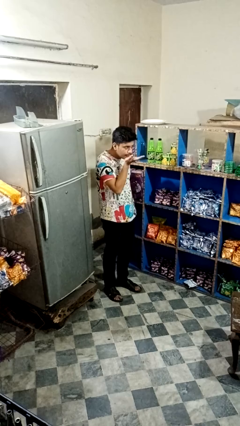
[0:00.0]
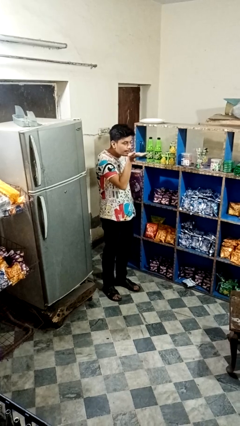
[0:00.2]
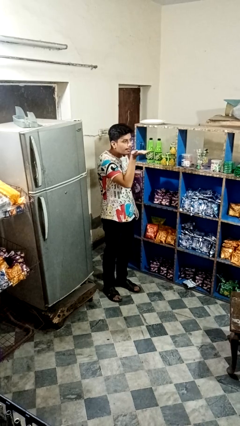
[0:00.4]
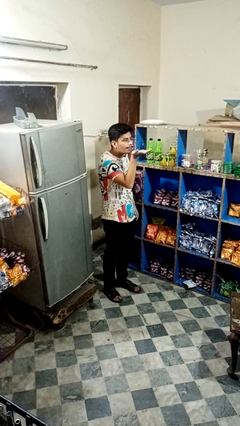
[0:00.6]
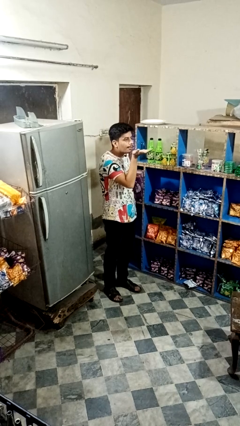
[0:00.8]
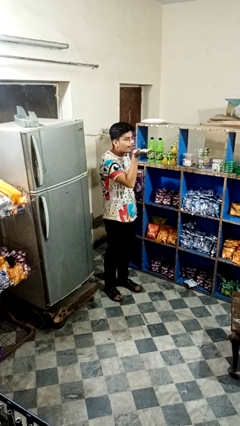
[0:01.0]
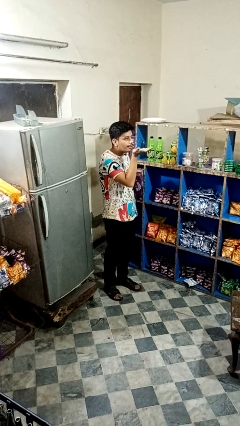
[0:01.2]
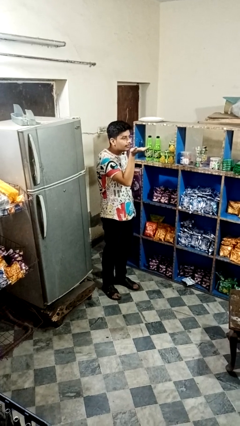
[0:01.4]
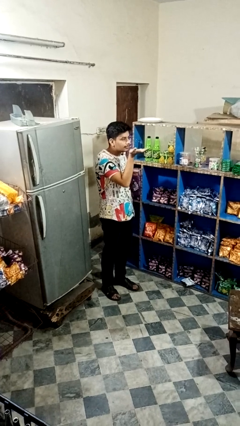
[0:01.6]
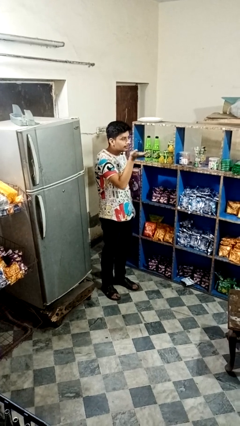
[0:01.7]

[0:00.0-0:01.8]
person gestures blow kiss

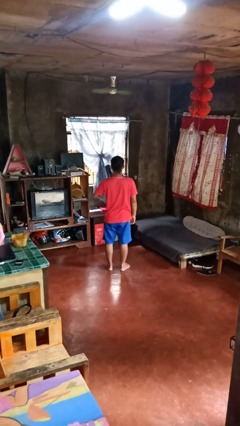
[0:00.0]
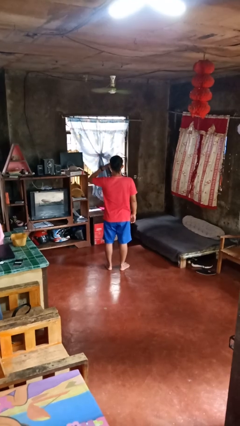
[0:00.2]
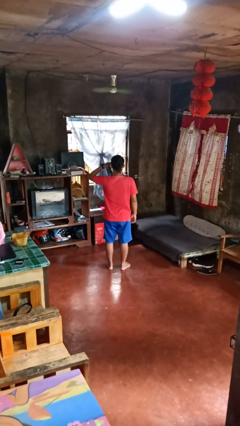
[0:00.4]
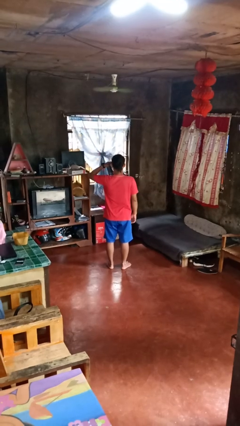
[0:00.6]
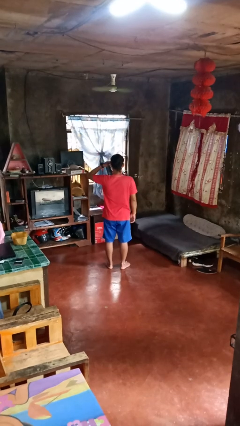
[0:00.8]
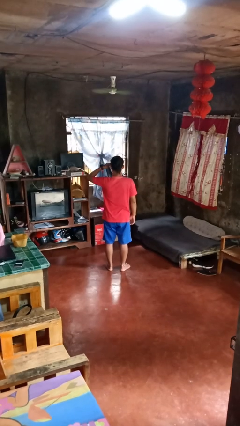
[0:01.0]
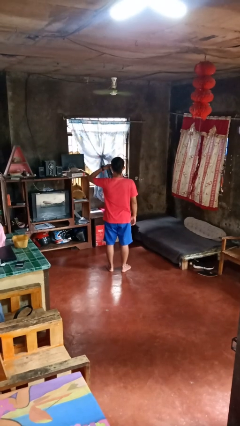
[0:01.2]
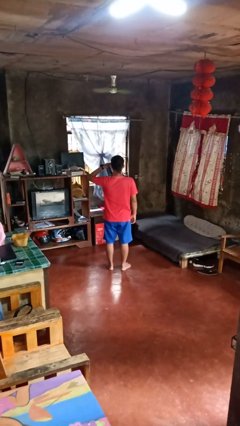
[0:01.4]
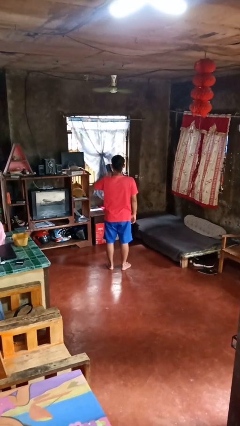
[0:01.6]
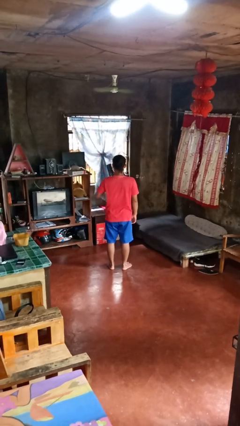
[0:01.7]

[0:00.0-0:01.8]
person salutes

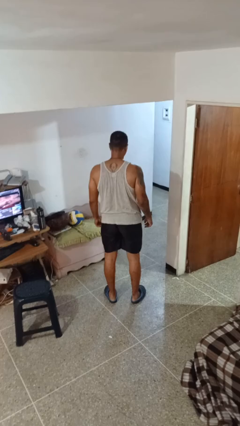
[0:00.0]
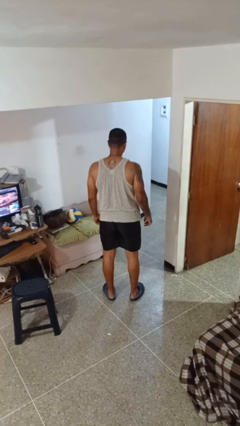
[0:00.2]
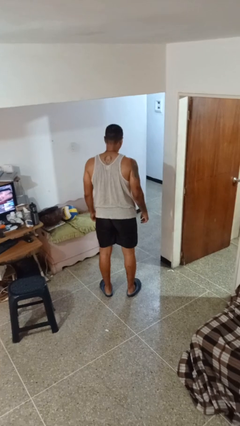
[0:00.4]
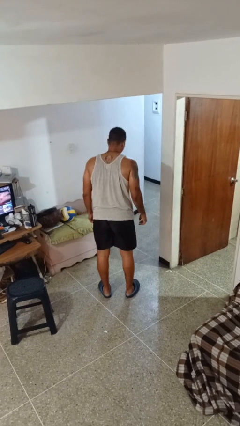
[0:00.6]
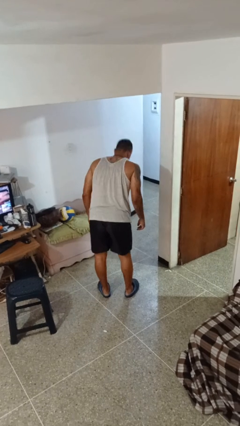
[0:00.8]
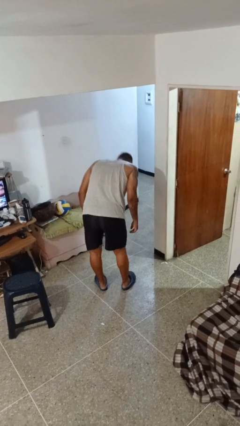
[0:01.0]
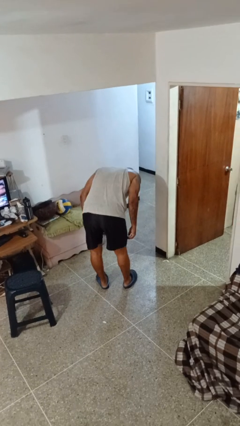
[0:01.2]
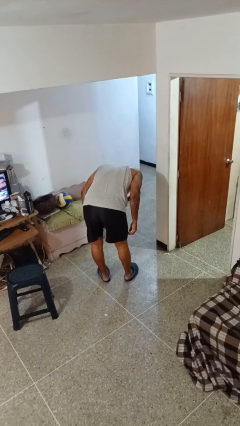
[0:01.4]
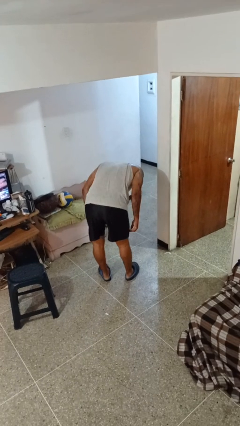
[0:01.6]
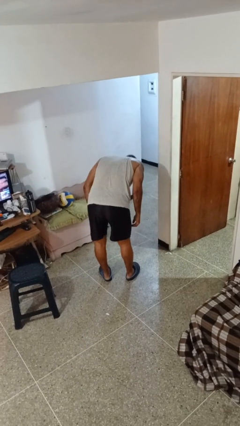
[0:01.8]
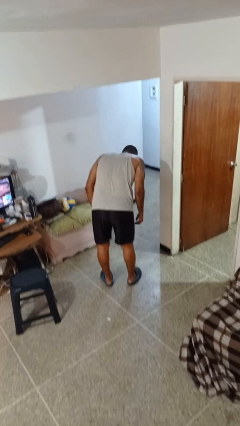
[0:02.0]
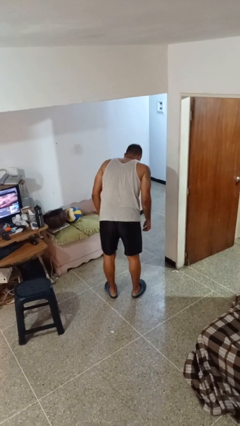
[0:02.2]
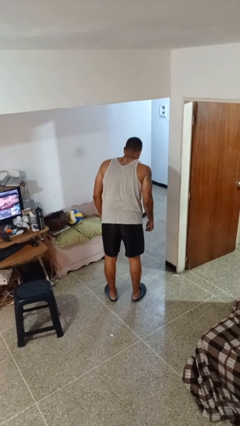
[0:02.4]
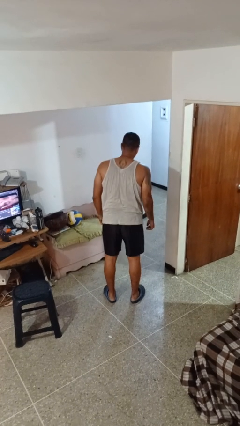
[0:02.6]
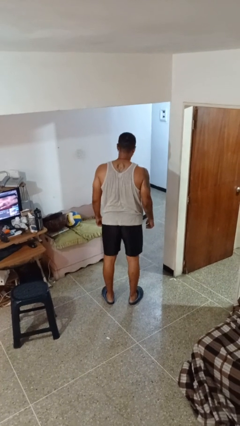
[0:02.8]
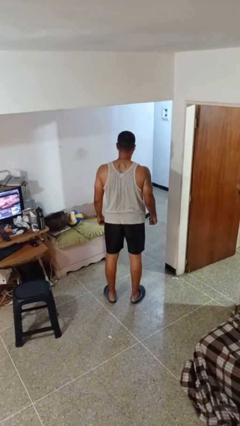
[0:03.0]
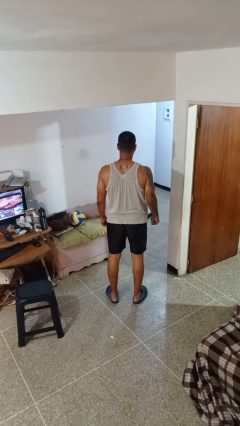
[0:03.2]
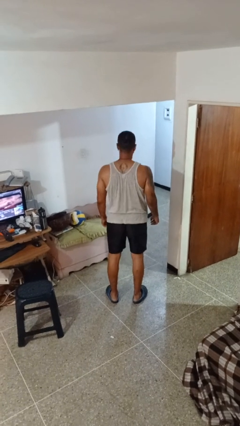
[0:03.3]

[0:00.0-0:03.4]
person bows

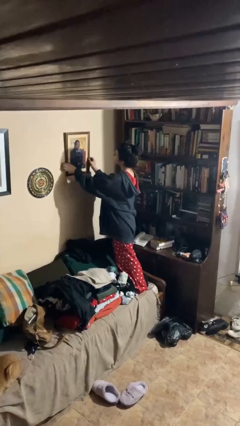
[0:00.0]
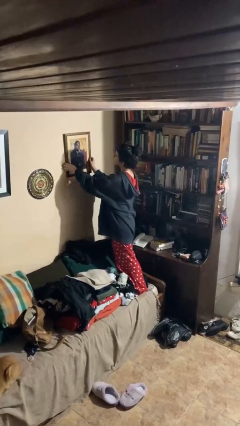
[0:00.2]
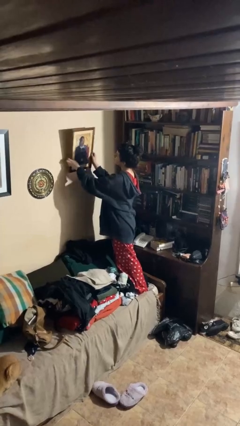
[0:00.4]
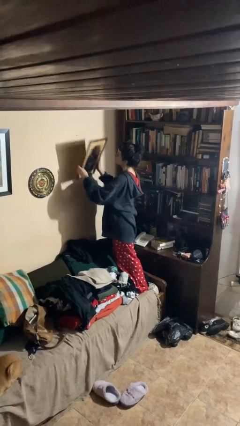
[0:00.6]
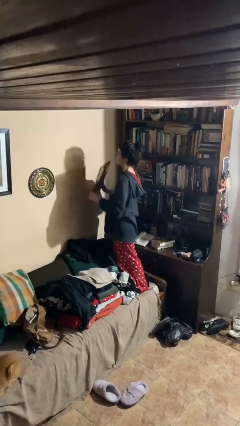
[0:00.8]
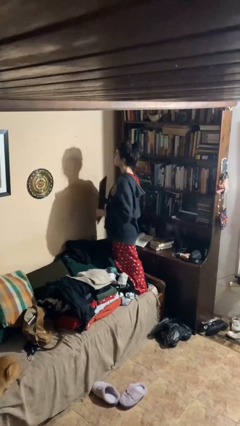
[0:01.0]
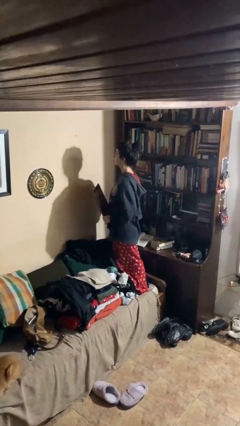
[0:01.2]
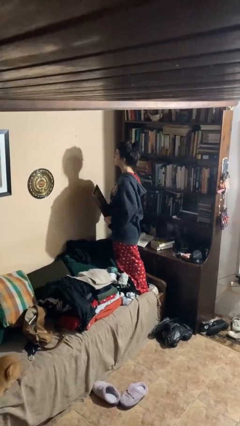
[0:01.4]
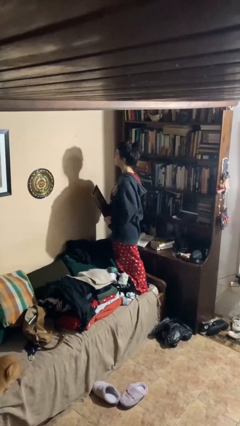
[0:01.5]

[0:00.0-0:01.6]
person takes down picture frame

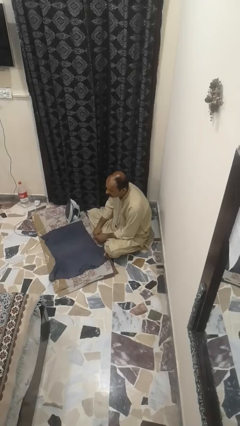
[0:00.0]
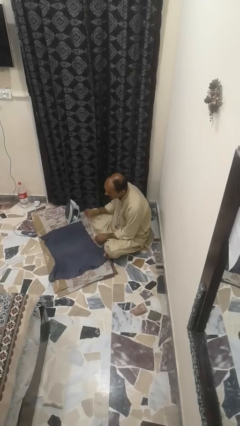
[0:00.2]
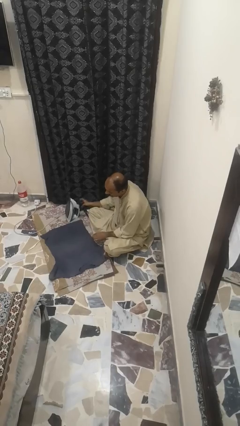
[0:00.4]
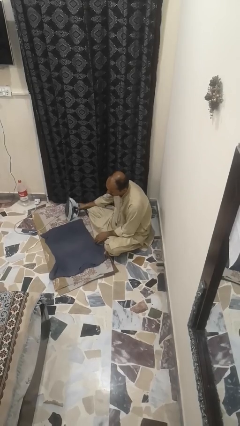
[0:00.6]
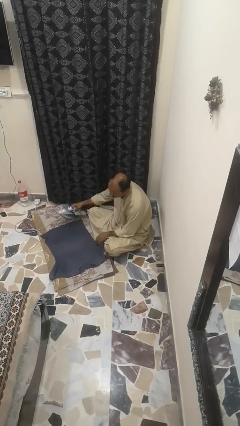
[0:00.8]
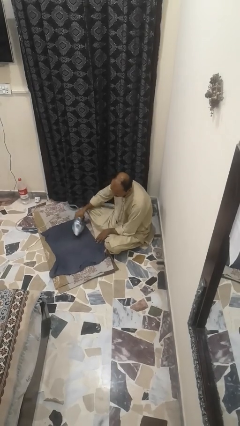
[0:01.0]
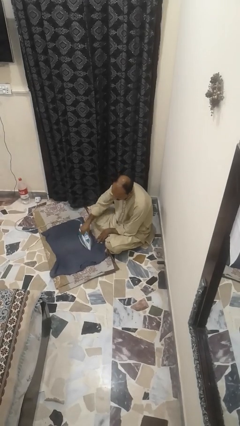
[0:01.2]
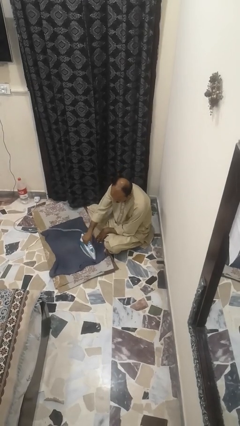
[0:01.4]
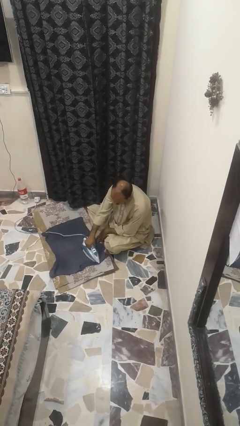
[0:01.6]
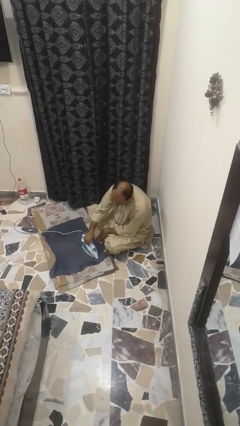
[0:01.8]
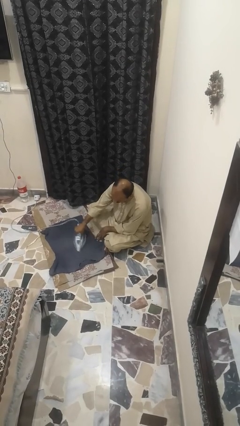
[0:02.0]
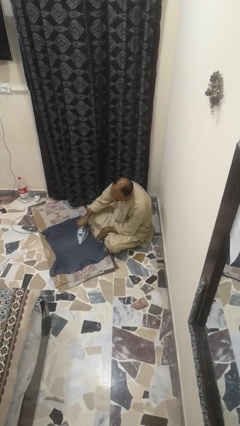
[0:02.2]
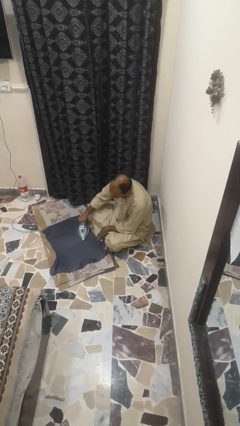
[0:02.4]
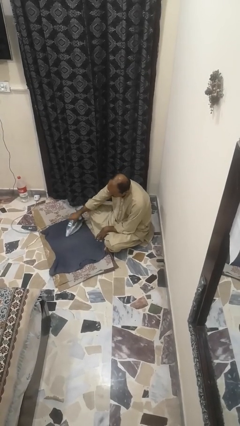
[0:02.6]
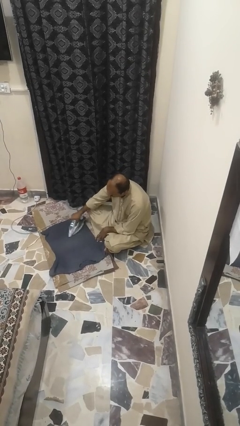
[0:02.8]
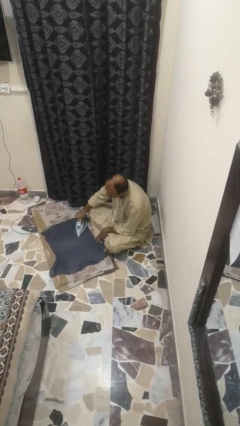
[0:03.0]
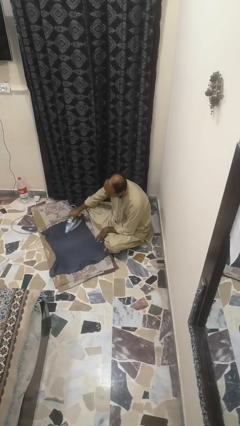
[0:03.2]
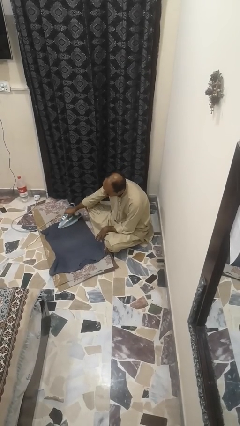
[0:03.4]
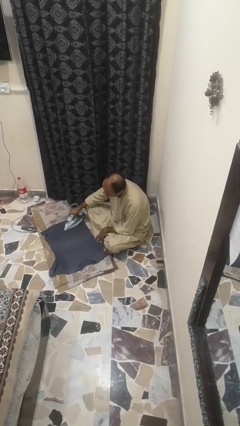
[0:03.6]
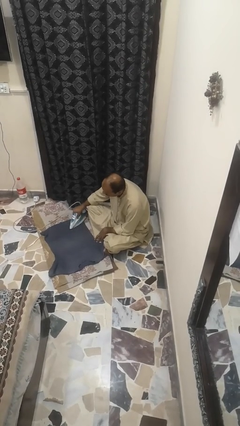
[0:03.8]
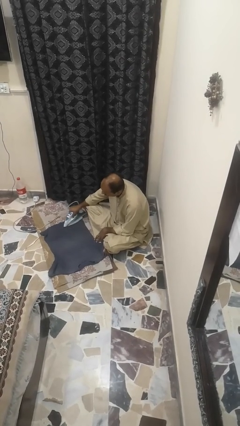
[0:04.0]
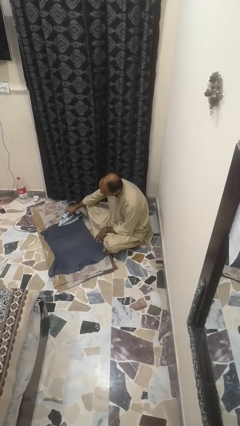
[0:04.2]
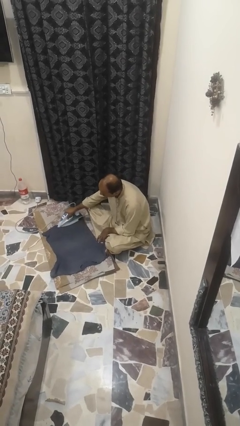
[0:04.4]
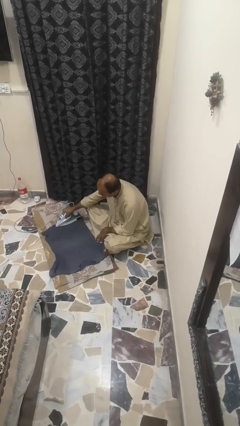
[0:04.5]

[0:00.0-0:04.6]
person irons clothes

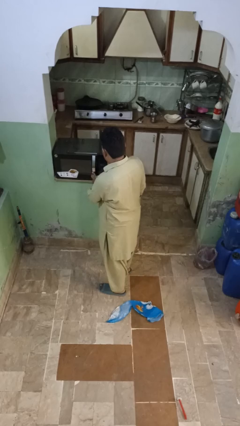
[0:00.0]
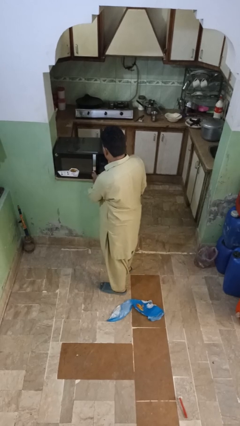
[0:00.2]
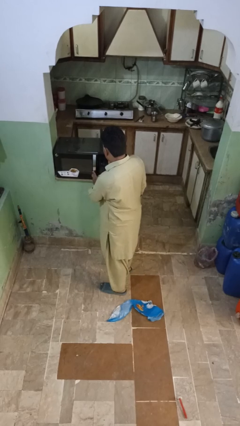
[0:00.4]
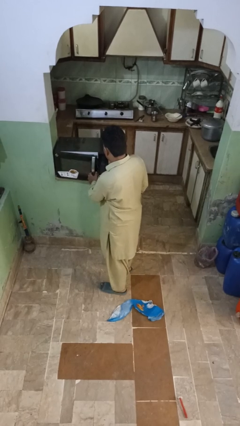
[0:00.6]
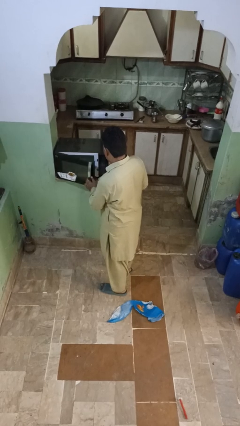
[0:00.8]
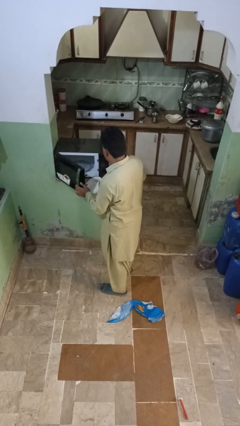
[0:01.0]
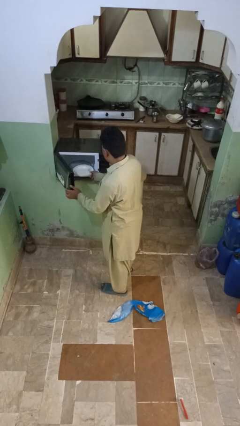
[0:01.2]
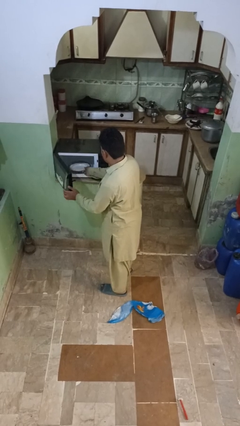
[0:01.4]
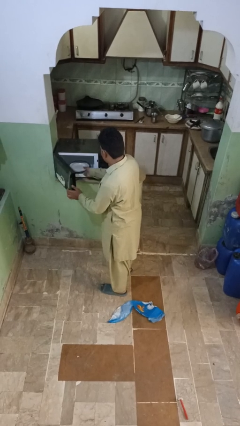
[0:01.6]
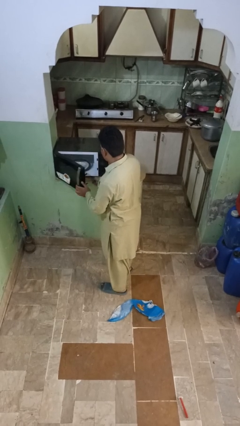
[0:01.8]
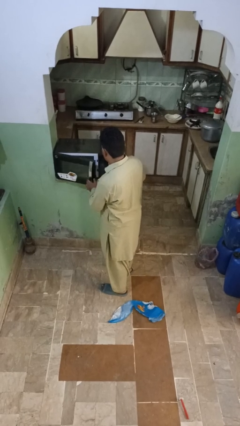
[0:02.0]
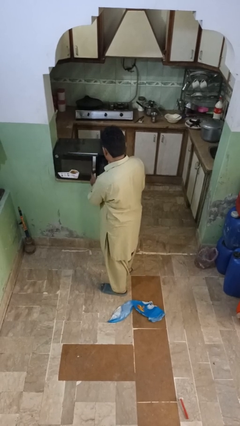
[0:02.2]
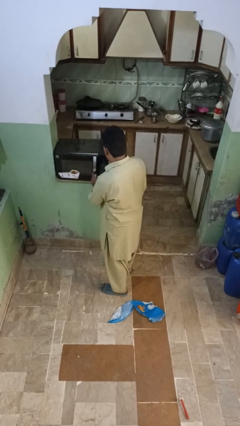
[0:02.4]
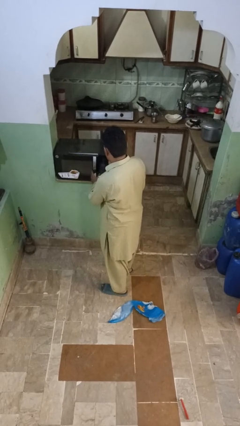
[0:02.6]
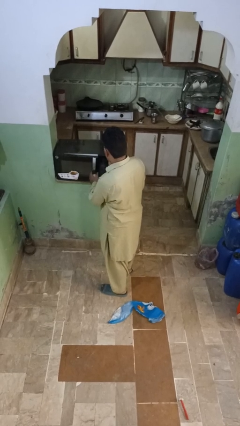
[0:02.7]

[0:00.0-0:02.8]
person puts object into microwave

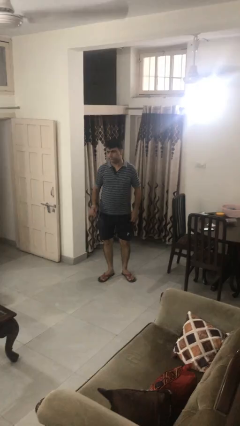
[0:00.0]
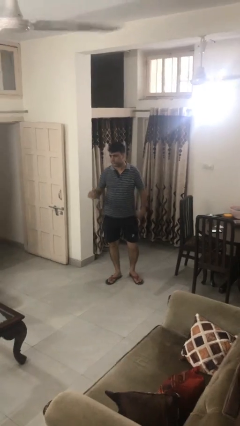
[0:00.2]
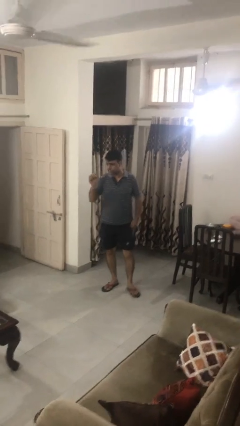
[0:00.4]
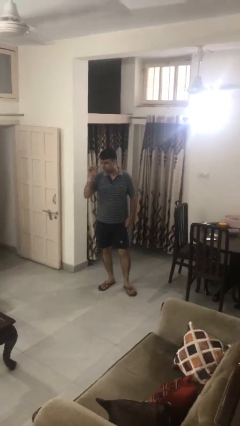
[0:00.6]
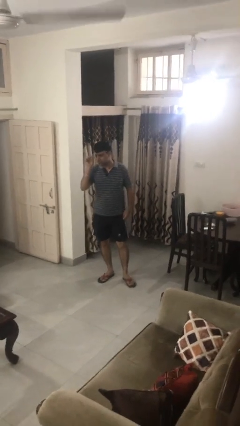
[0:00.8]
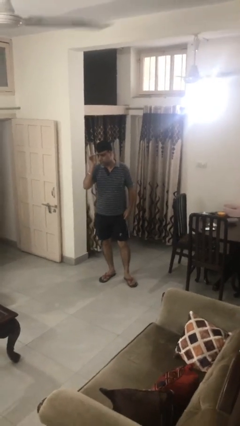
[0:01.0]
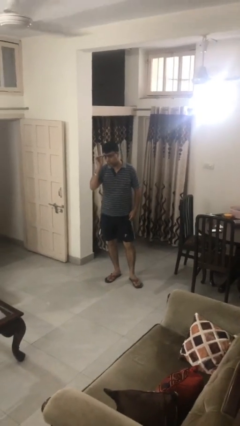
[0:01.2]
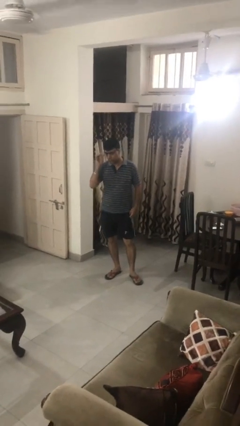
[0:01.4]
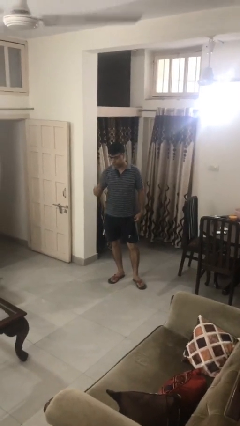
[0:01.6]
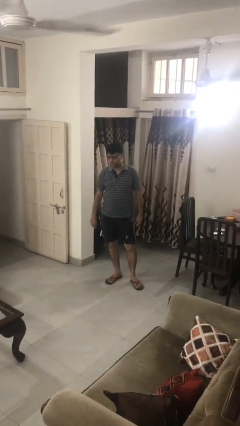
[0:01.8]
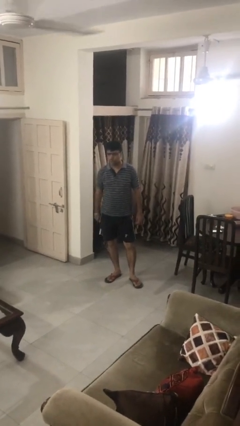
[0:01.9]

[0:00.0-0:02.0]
person puts on glasses
